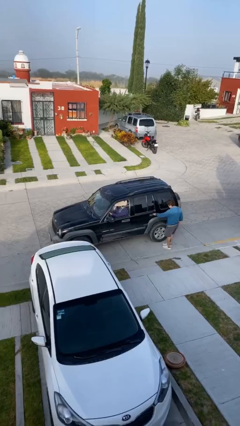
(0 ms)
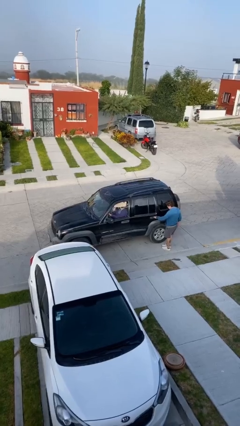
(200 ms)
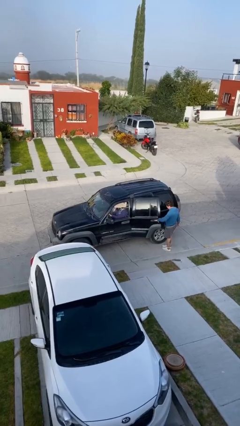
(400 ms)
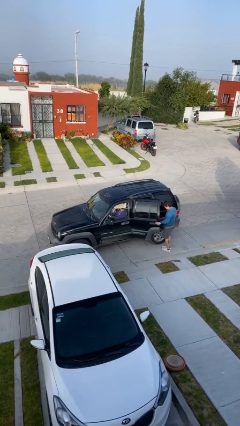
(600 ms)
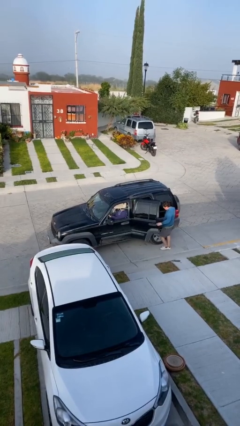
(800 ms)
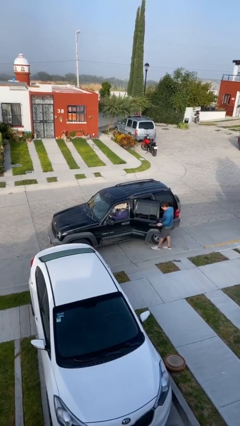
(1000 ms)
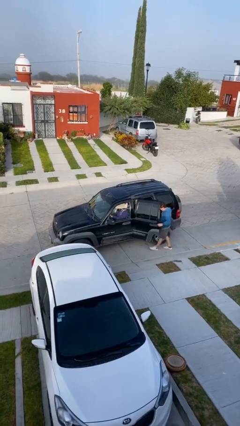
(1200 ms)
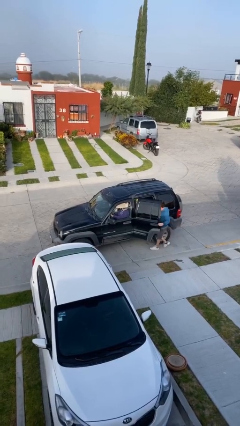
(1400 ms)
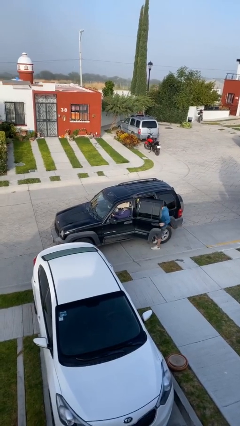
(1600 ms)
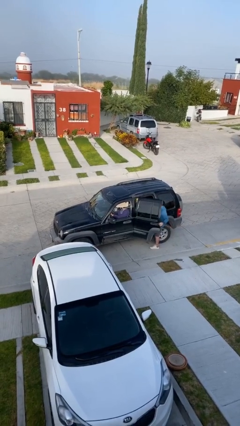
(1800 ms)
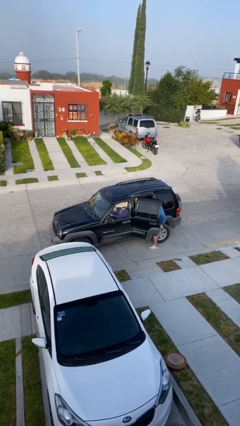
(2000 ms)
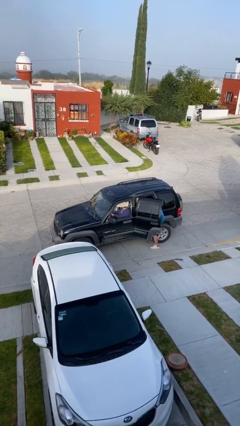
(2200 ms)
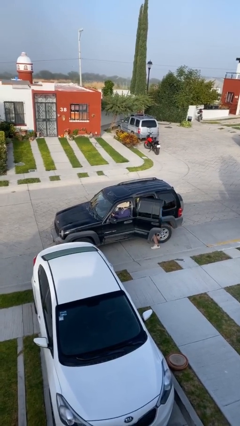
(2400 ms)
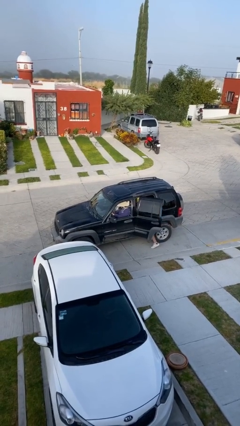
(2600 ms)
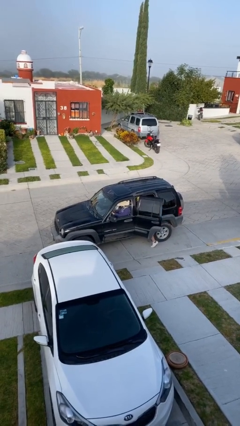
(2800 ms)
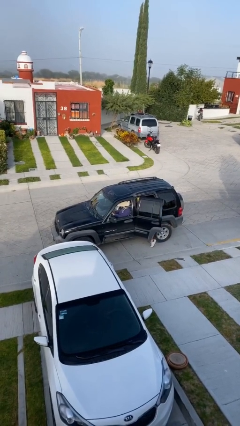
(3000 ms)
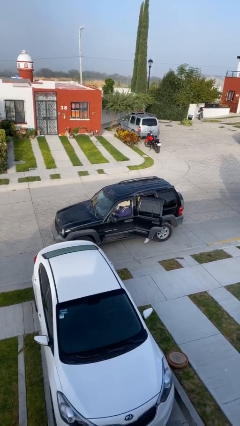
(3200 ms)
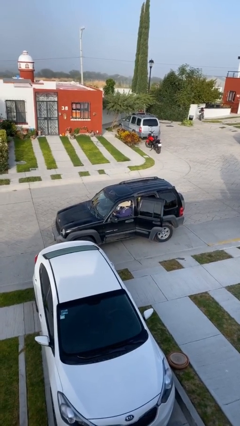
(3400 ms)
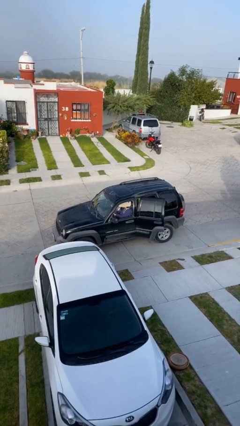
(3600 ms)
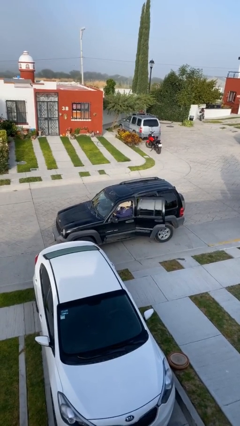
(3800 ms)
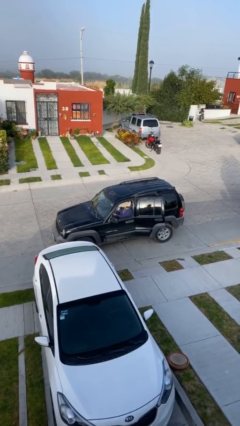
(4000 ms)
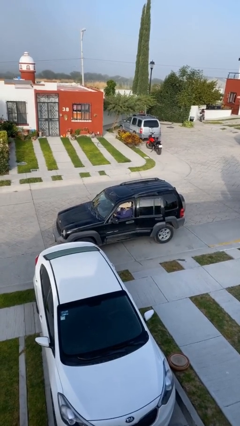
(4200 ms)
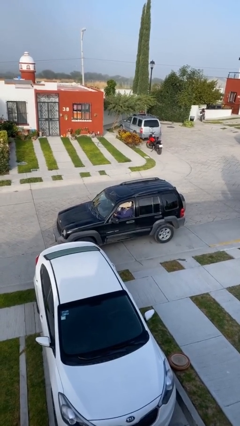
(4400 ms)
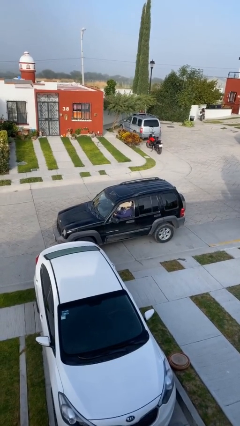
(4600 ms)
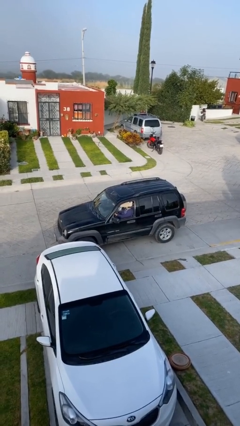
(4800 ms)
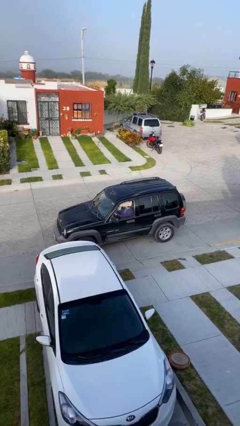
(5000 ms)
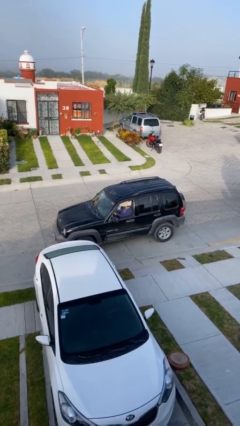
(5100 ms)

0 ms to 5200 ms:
car picks up person

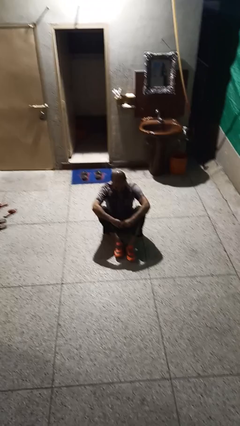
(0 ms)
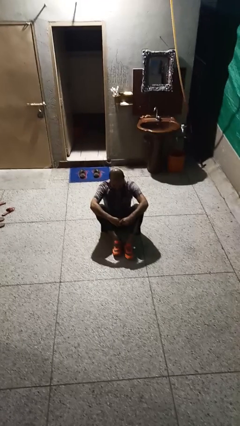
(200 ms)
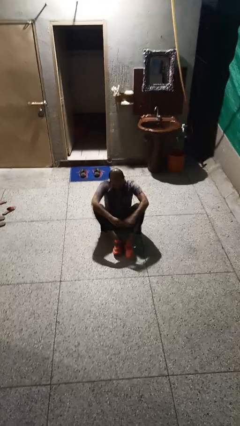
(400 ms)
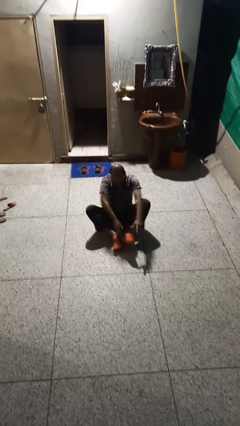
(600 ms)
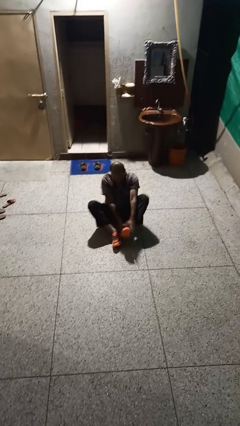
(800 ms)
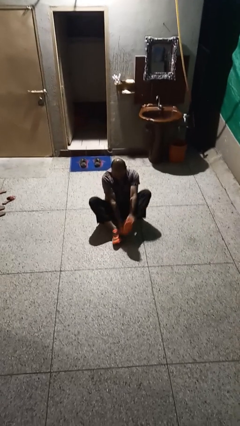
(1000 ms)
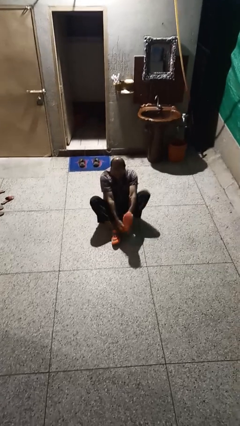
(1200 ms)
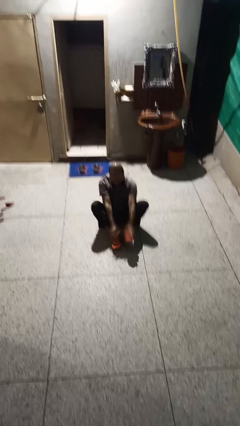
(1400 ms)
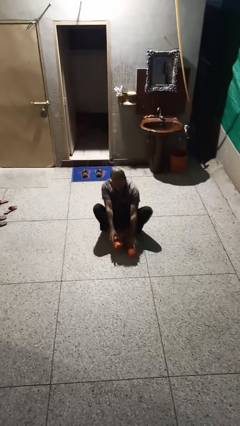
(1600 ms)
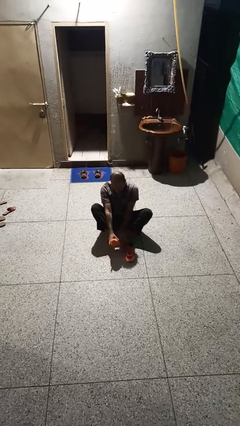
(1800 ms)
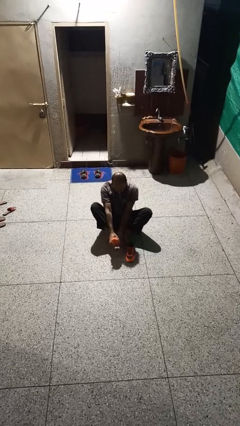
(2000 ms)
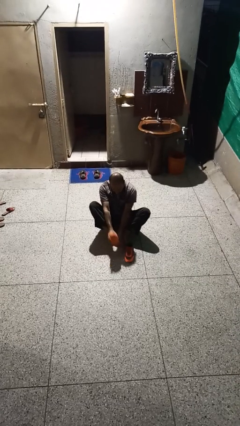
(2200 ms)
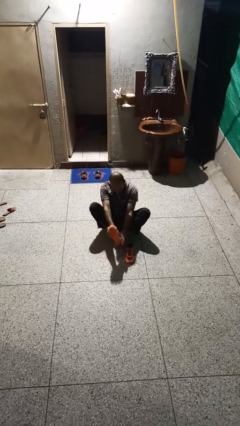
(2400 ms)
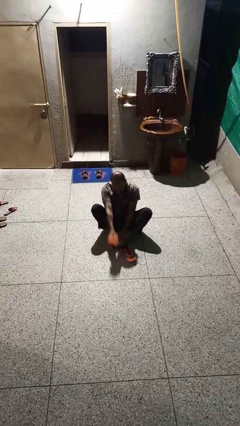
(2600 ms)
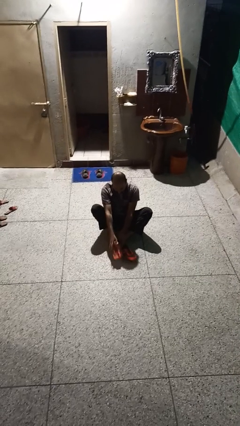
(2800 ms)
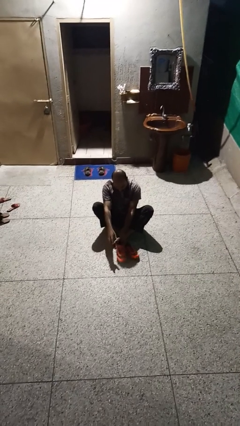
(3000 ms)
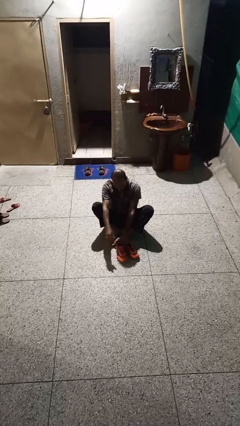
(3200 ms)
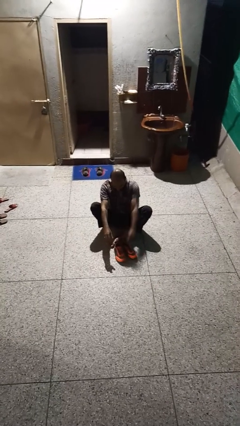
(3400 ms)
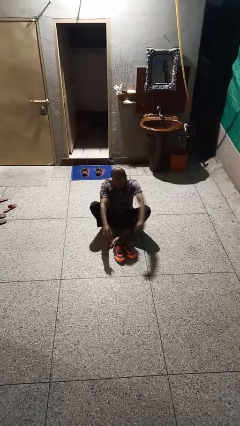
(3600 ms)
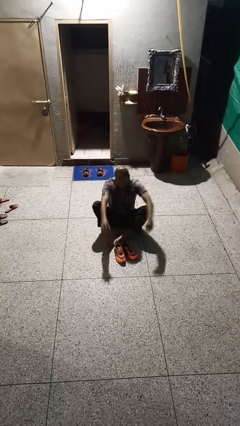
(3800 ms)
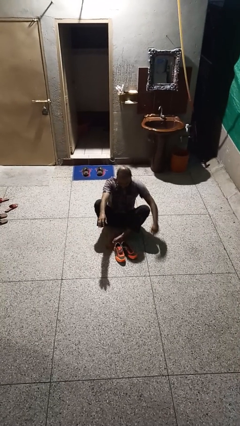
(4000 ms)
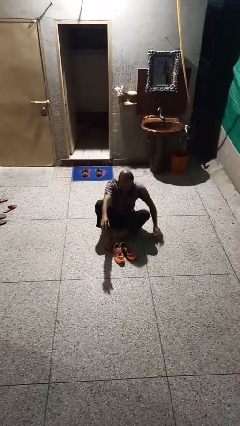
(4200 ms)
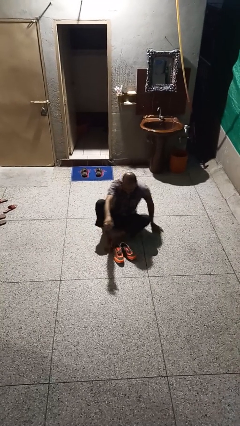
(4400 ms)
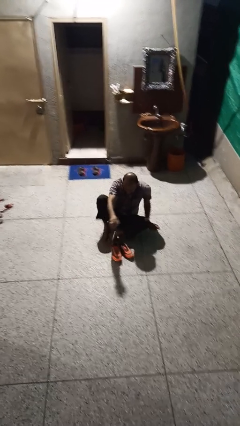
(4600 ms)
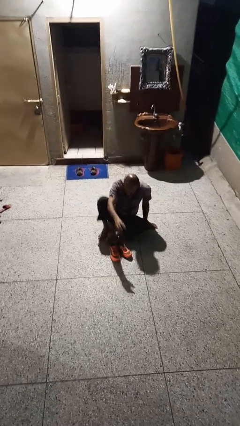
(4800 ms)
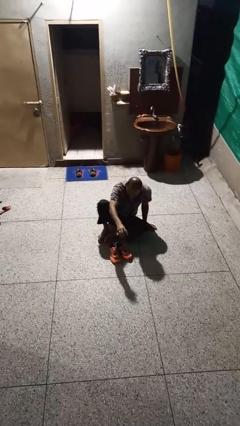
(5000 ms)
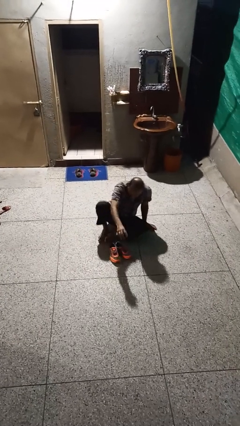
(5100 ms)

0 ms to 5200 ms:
person takes off shoes

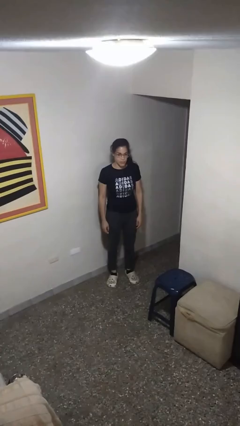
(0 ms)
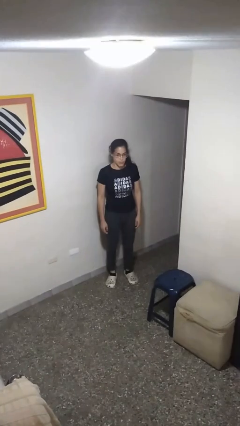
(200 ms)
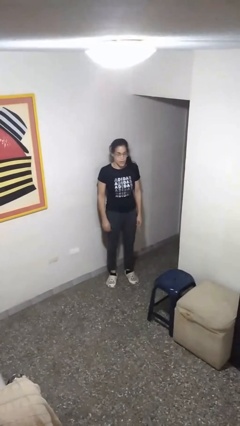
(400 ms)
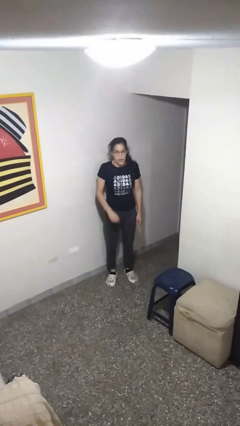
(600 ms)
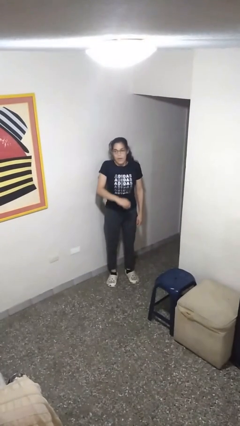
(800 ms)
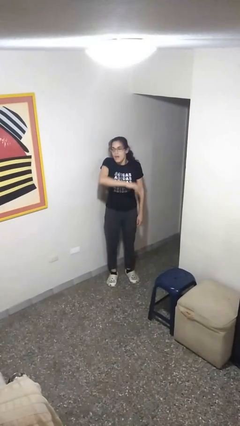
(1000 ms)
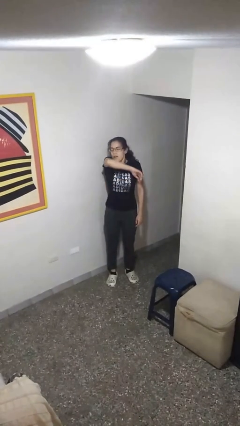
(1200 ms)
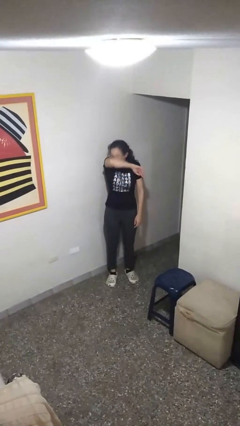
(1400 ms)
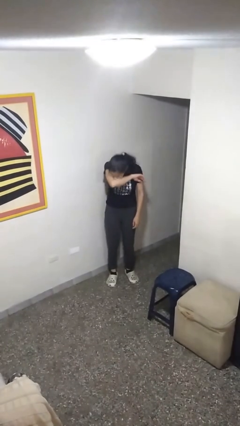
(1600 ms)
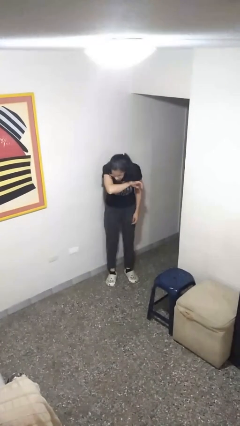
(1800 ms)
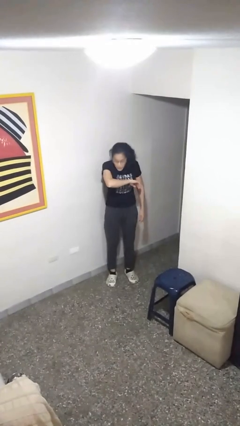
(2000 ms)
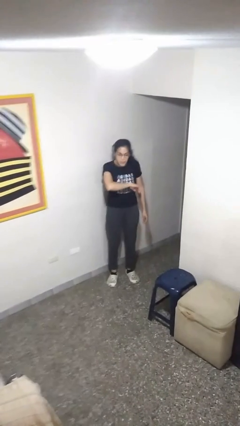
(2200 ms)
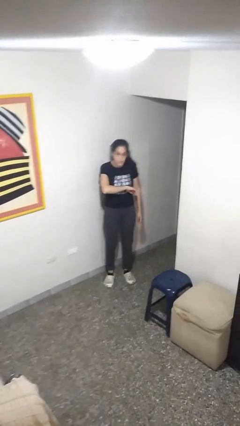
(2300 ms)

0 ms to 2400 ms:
person sneezes into arm

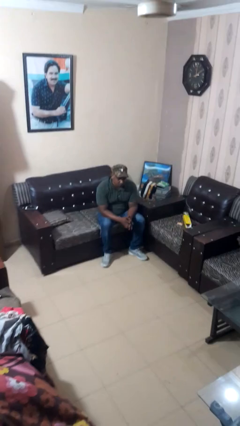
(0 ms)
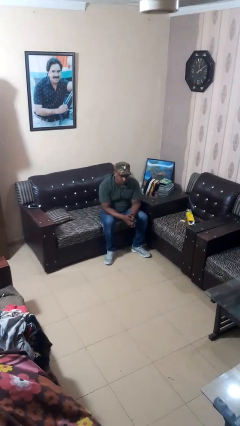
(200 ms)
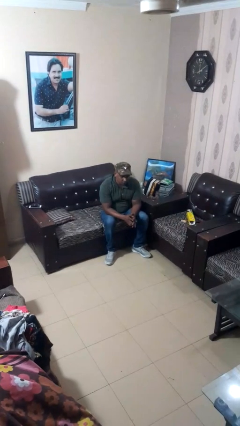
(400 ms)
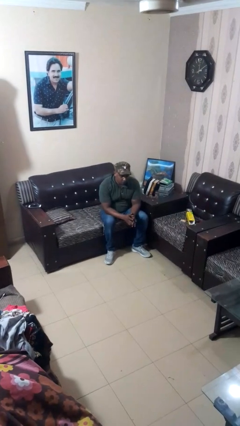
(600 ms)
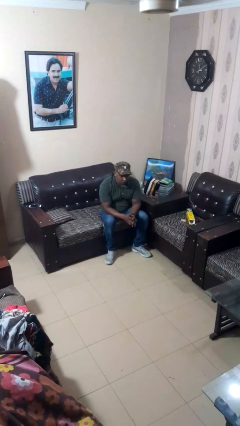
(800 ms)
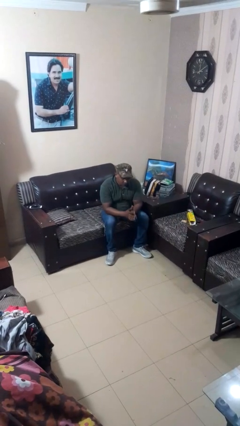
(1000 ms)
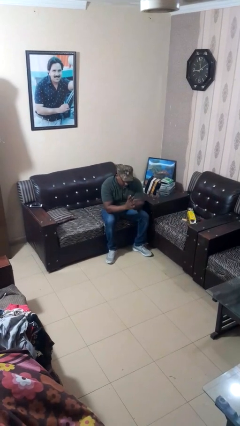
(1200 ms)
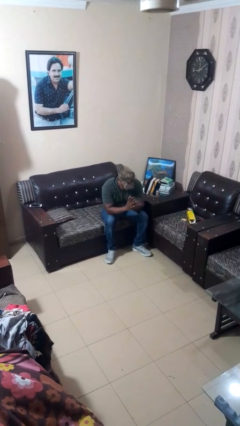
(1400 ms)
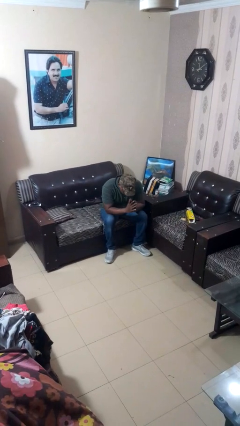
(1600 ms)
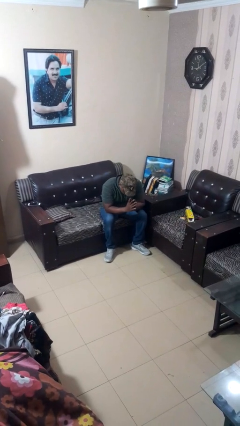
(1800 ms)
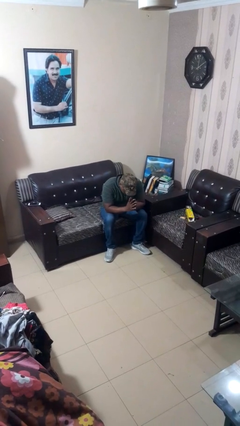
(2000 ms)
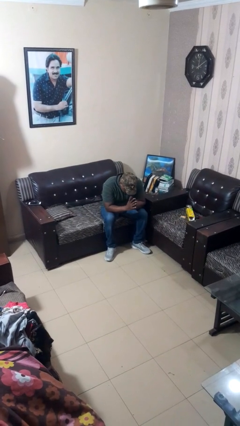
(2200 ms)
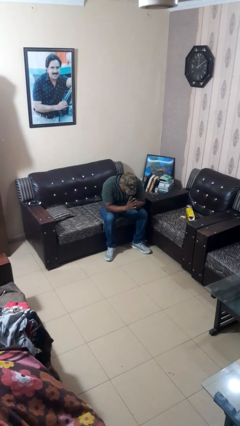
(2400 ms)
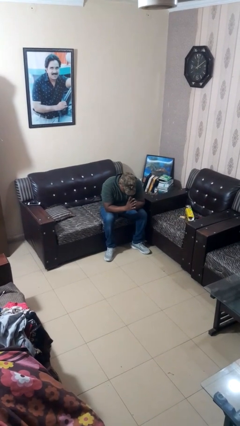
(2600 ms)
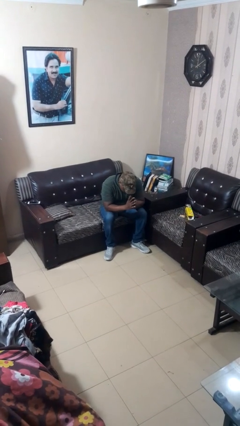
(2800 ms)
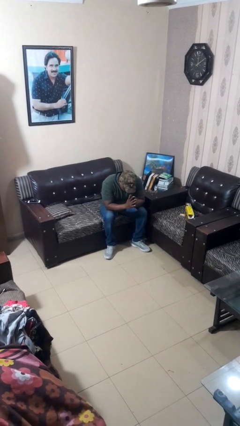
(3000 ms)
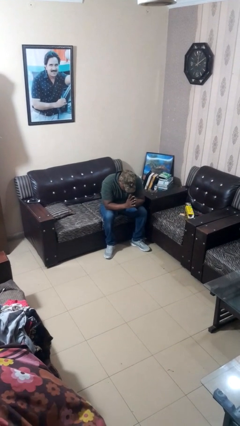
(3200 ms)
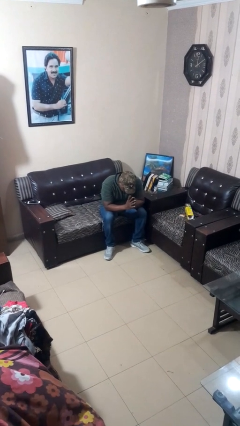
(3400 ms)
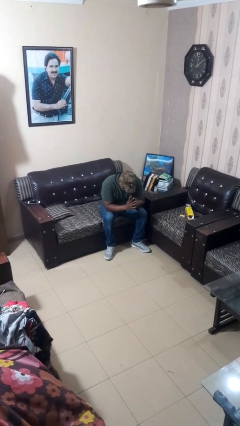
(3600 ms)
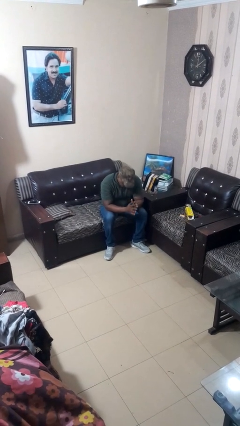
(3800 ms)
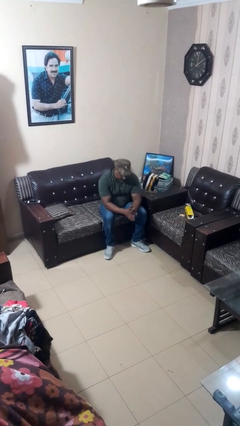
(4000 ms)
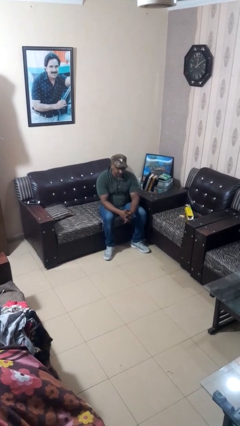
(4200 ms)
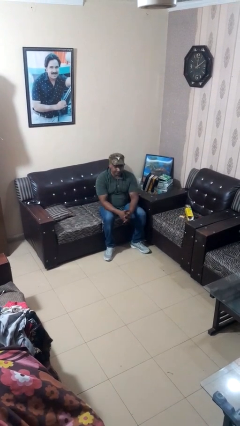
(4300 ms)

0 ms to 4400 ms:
person prays

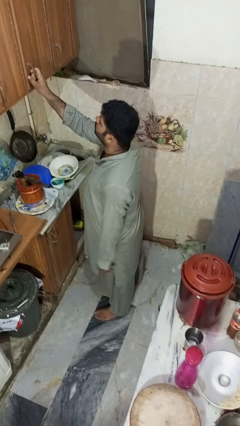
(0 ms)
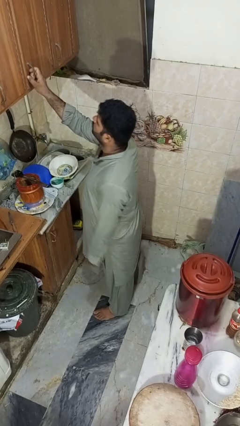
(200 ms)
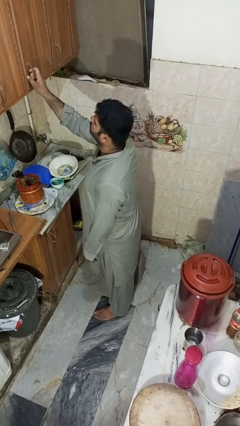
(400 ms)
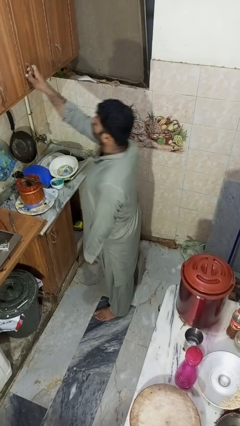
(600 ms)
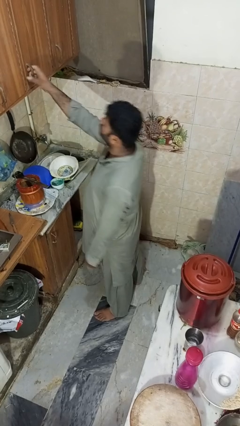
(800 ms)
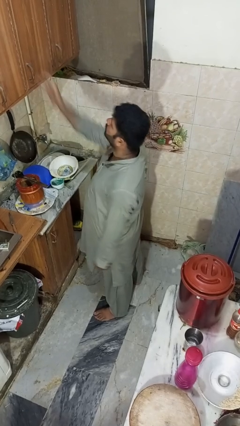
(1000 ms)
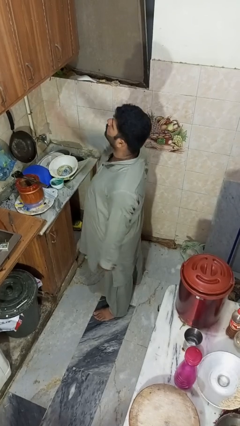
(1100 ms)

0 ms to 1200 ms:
person closes cabinet
